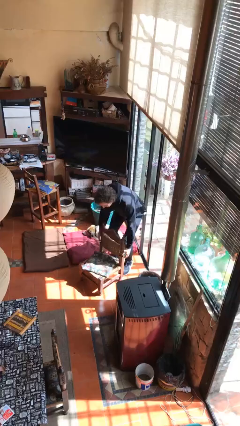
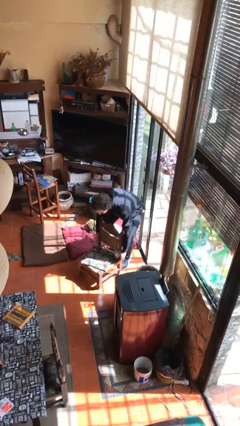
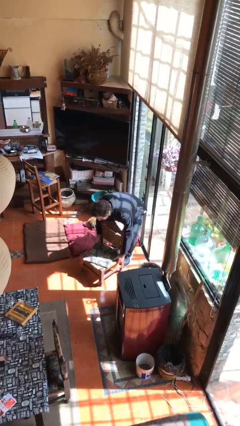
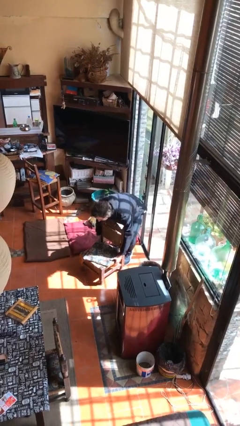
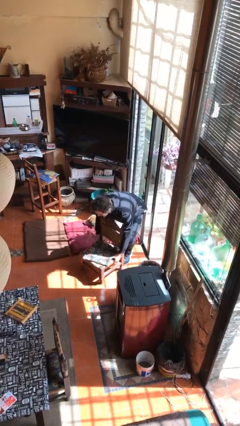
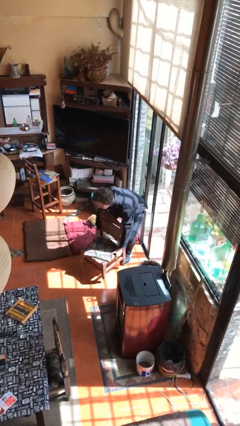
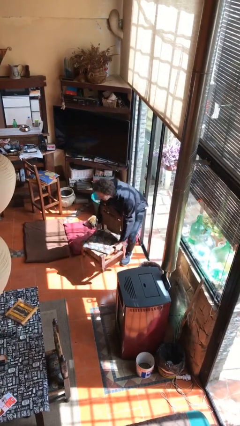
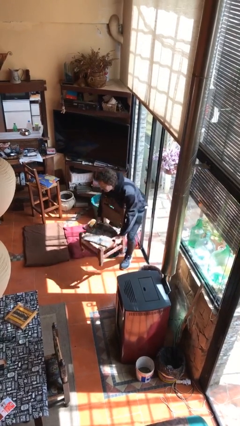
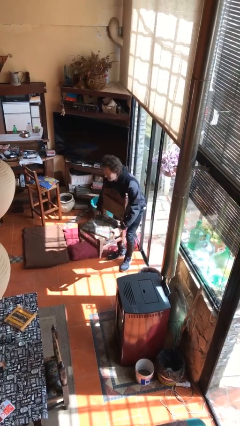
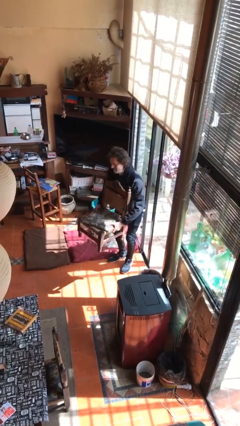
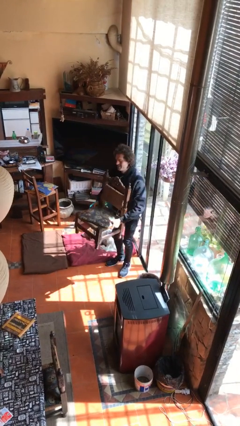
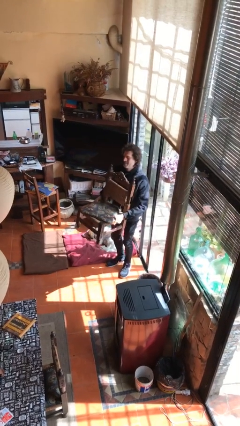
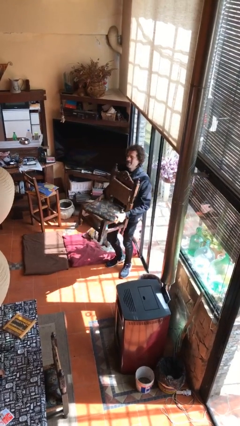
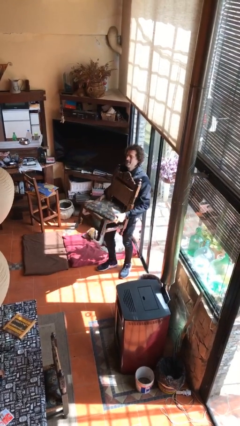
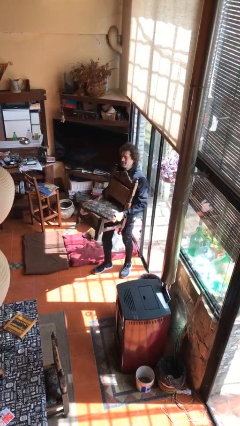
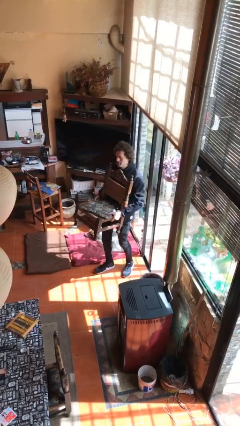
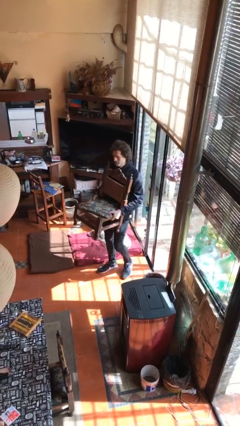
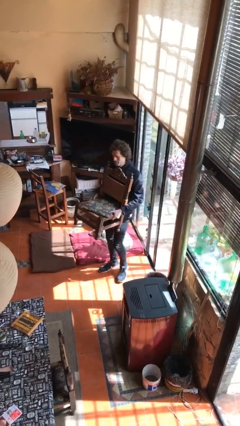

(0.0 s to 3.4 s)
person picks up object from floor

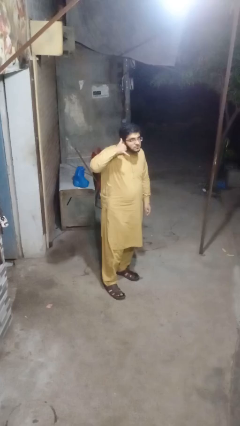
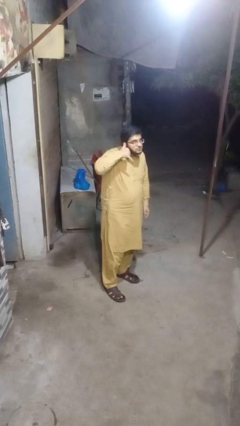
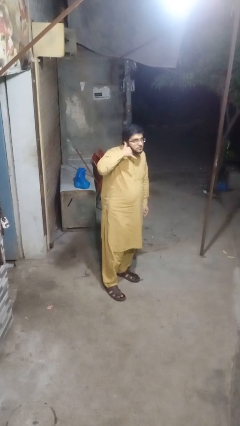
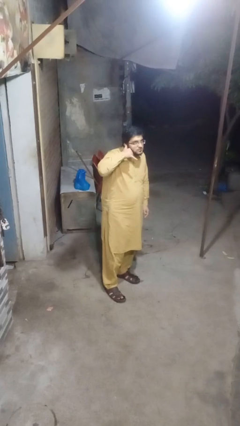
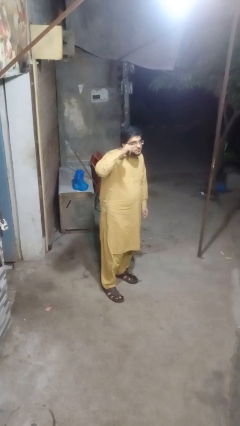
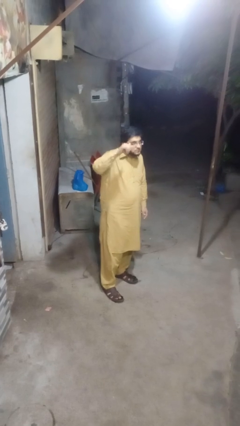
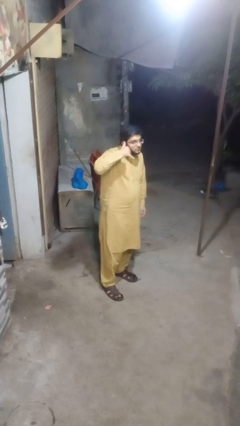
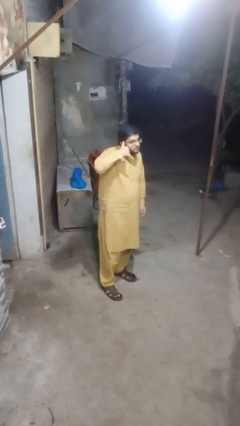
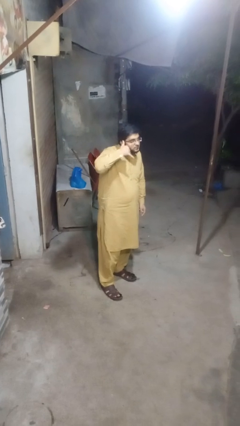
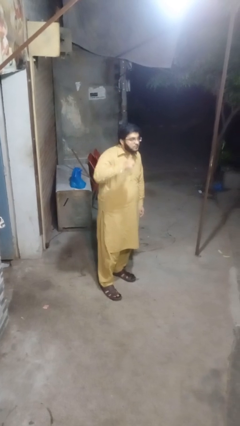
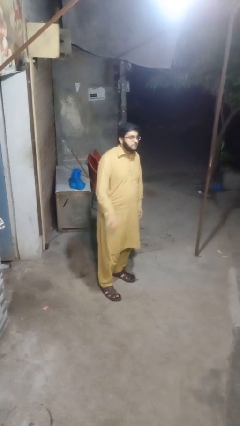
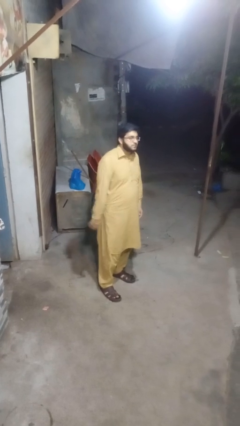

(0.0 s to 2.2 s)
person gestures call me

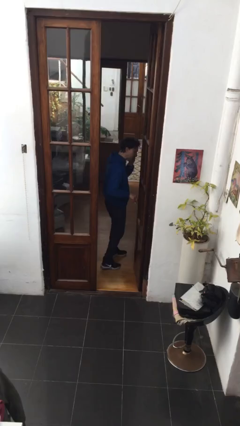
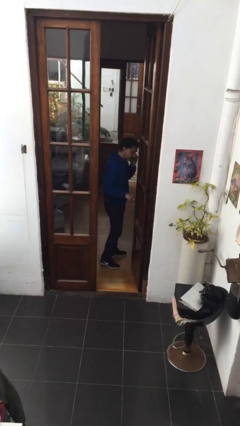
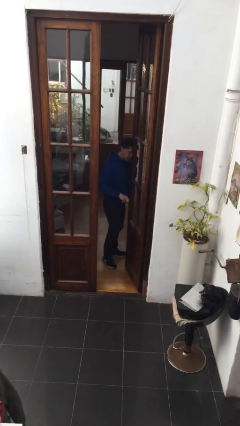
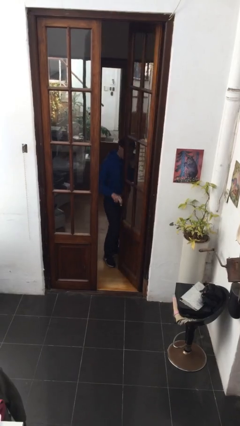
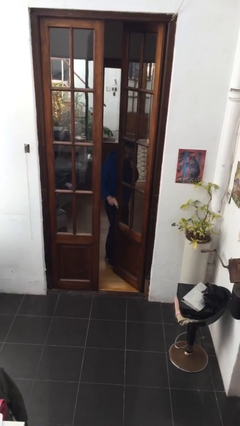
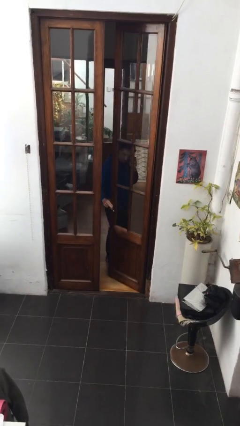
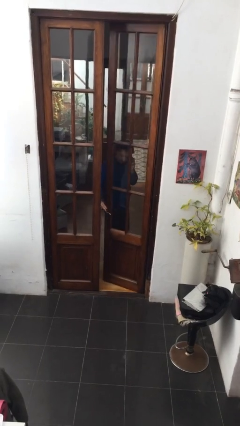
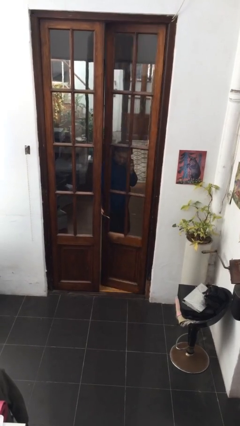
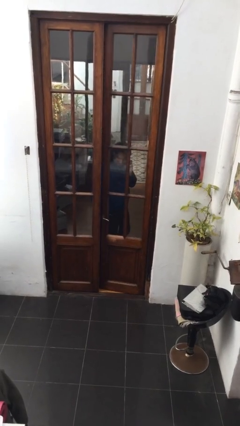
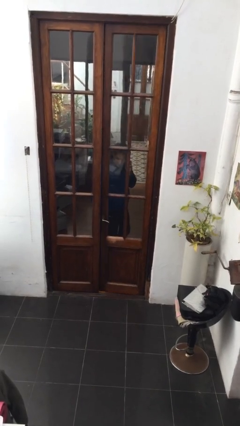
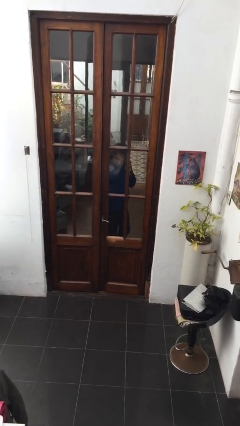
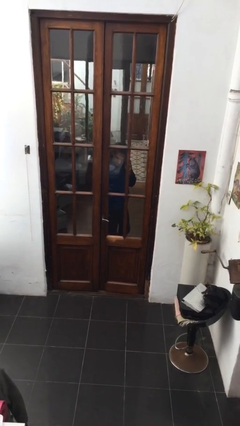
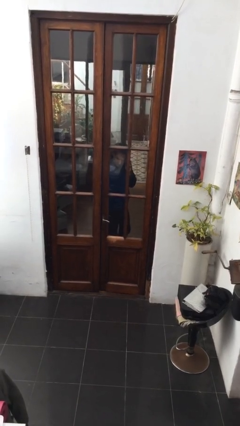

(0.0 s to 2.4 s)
person closes facility door

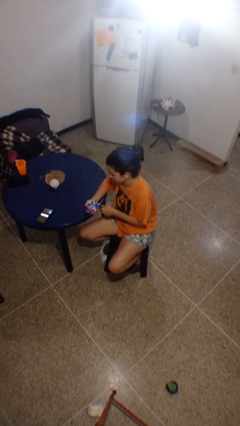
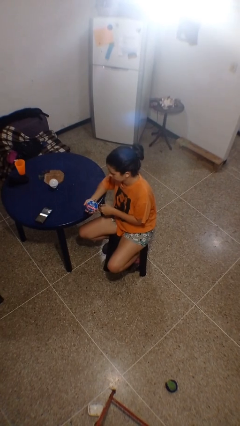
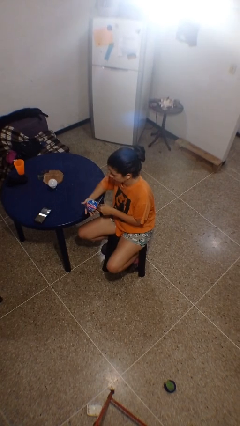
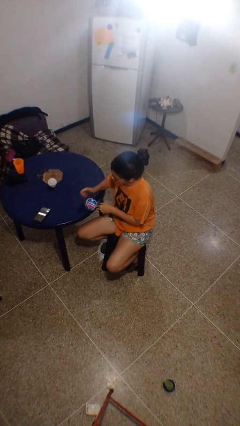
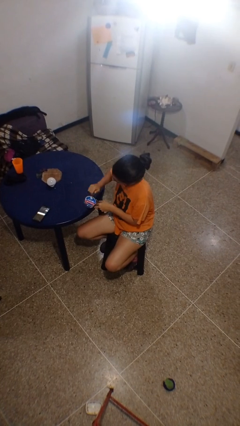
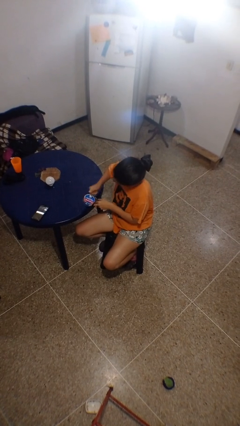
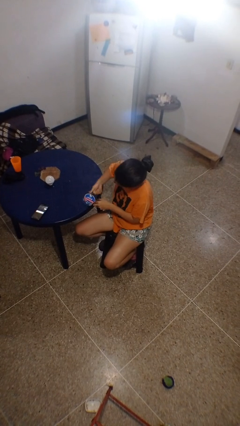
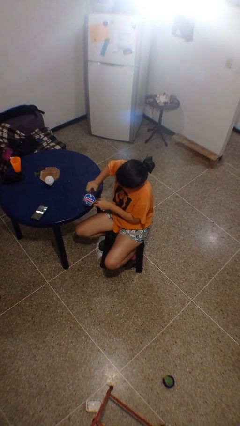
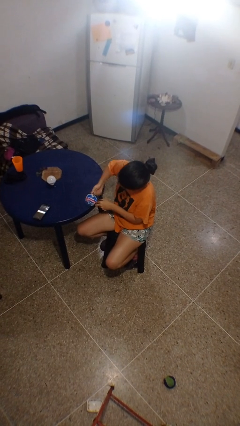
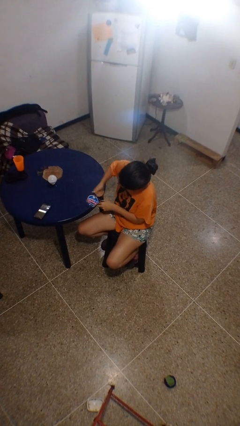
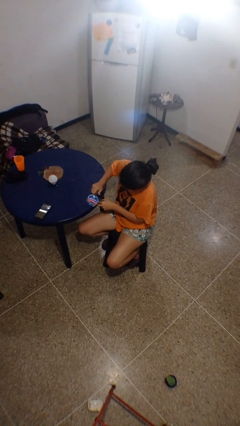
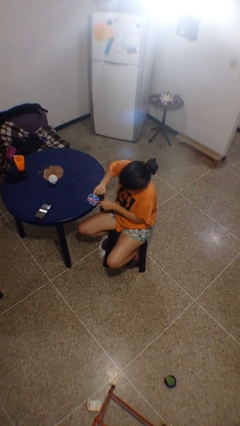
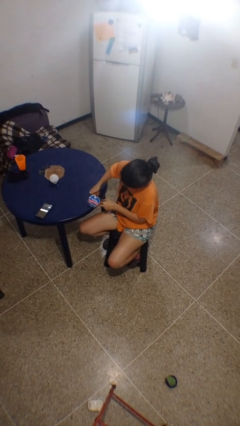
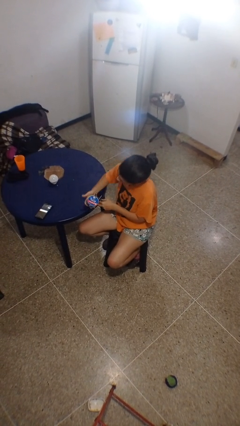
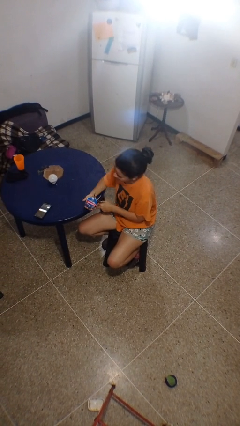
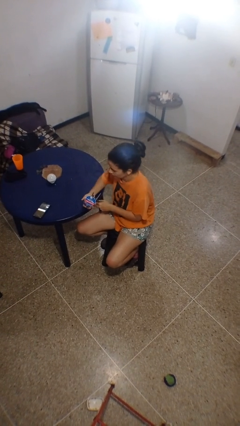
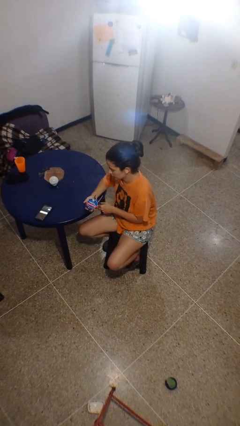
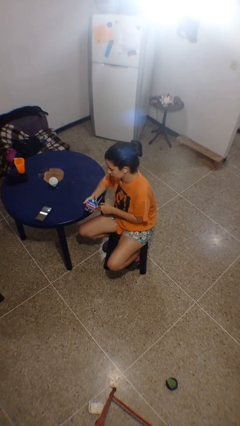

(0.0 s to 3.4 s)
person opens can with can opener

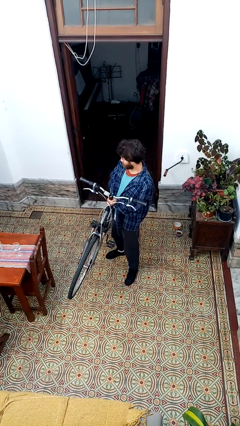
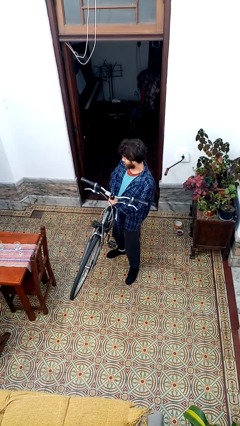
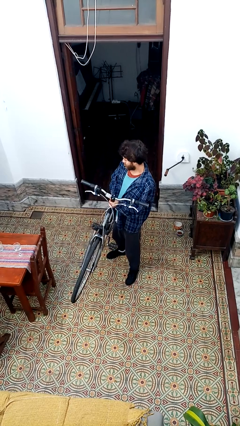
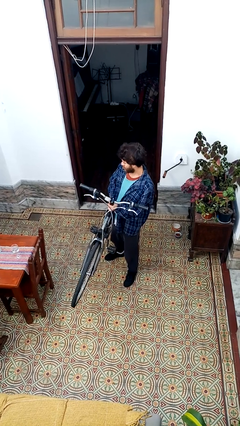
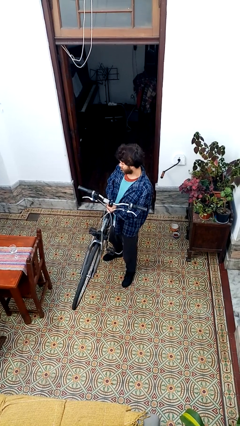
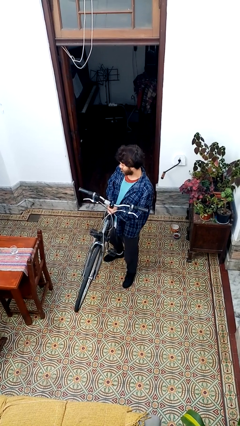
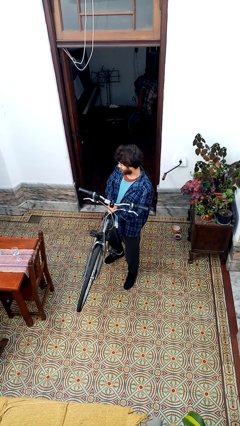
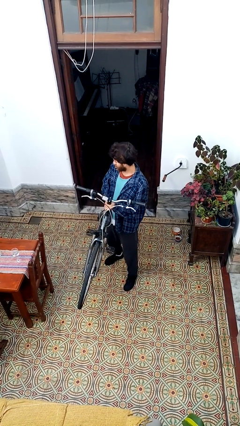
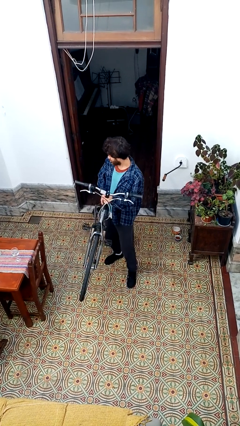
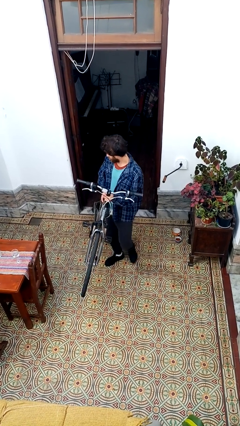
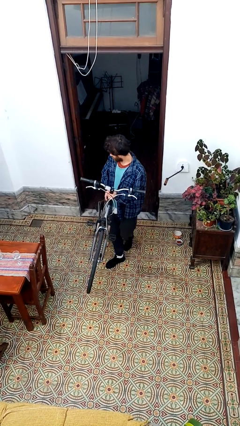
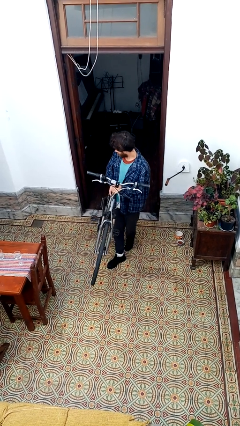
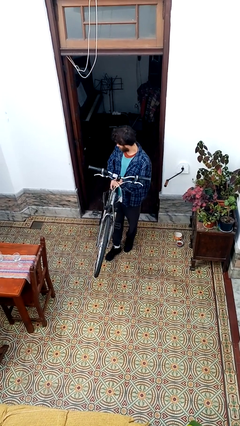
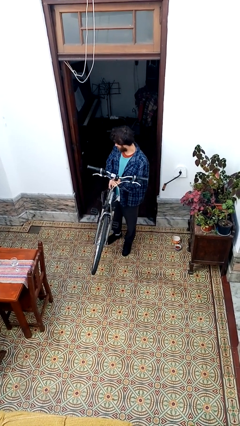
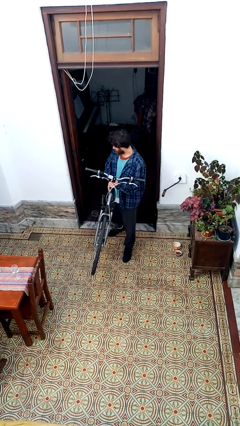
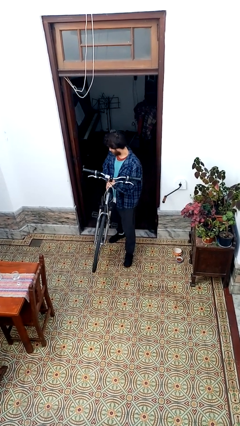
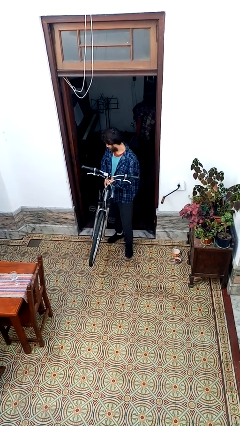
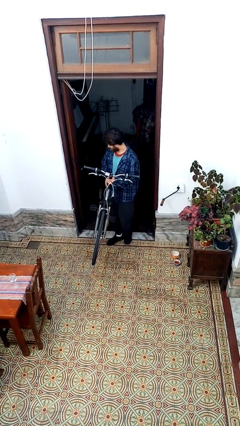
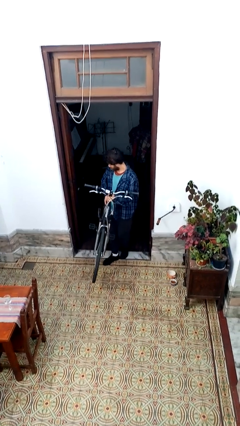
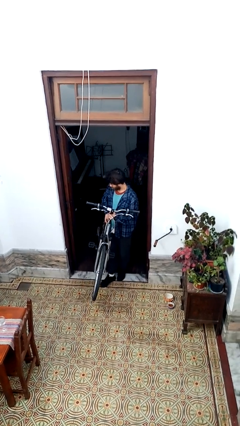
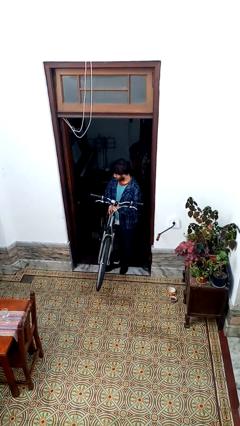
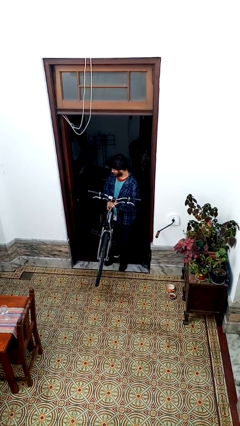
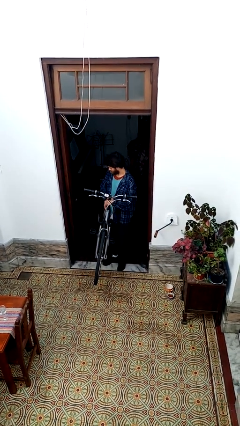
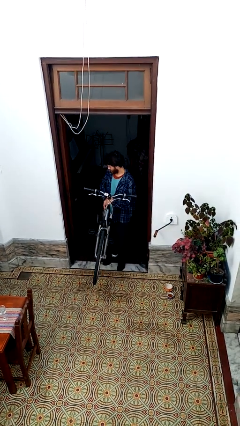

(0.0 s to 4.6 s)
person carries bicycle

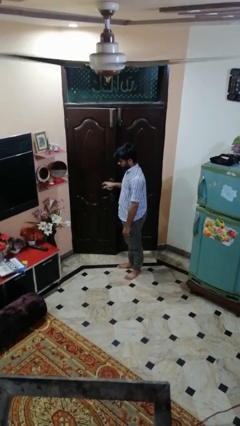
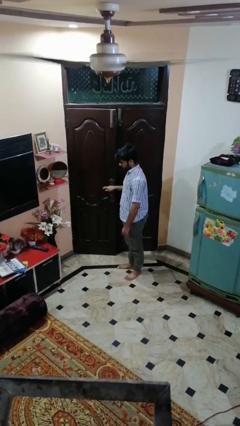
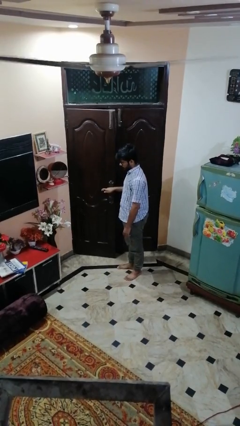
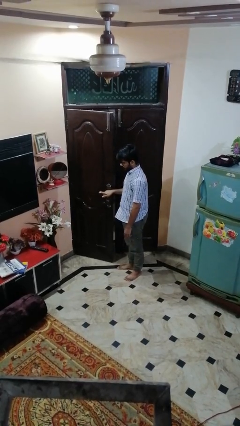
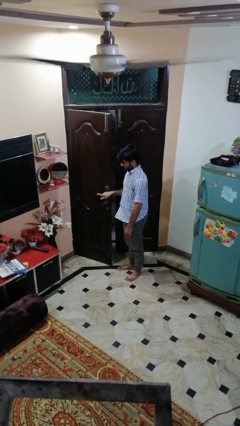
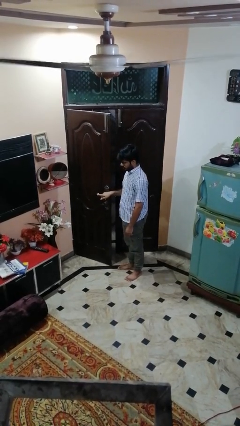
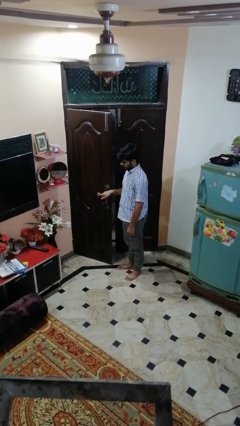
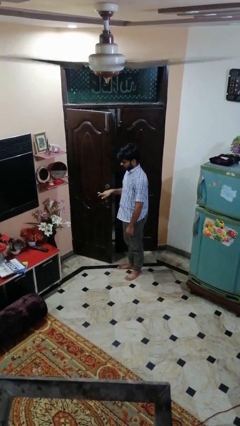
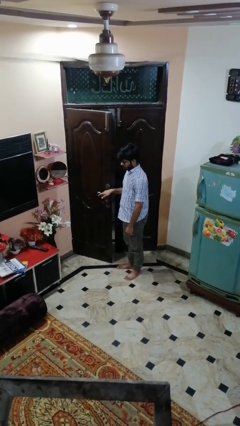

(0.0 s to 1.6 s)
person opens facility door
